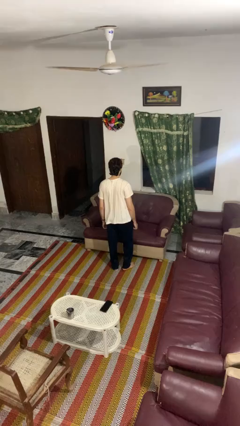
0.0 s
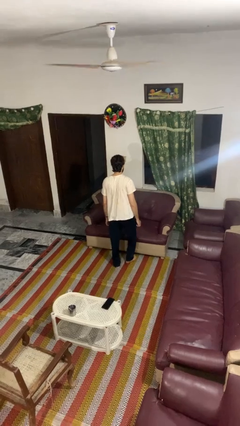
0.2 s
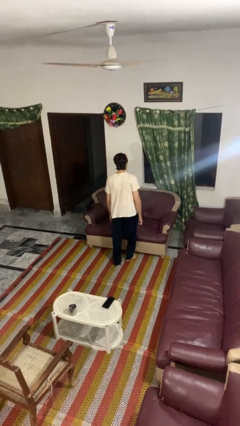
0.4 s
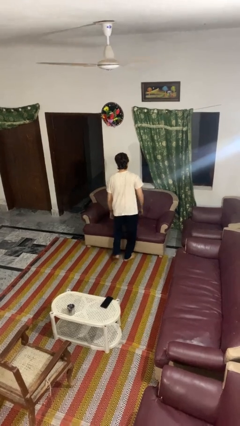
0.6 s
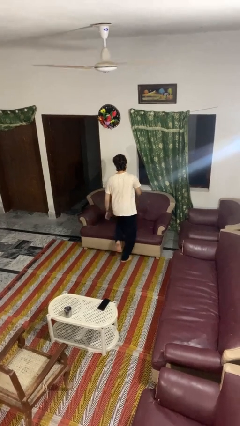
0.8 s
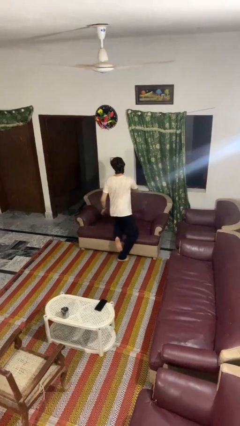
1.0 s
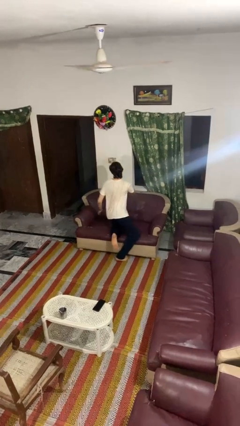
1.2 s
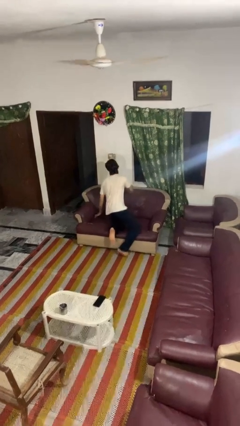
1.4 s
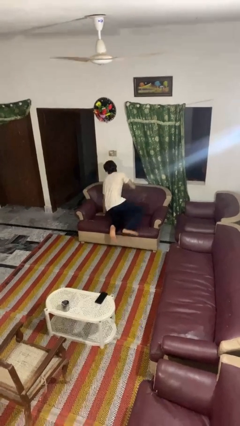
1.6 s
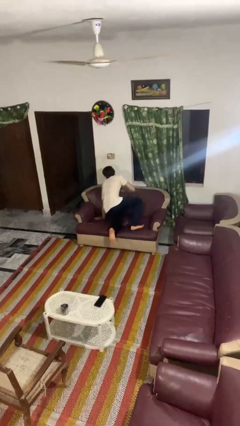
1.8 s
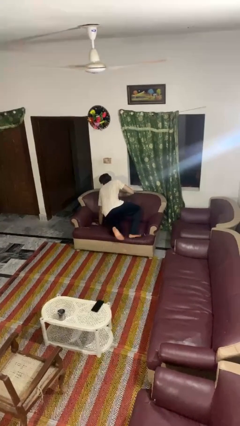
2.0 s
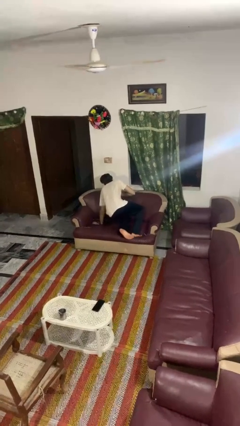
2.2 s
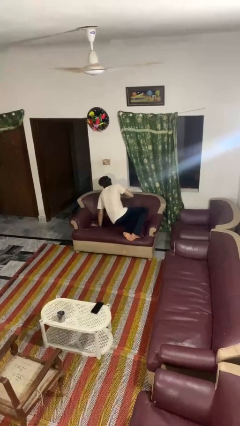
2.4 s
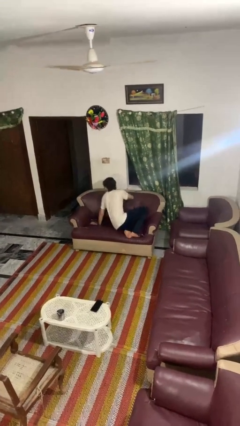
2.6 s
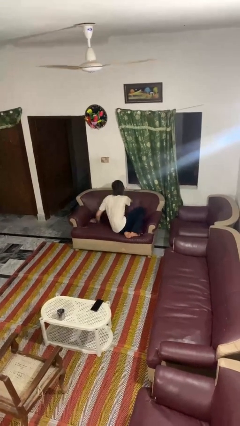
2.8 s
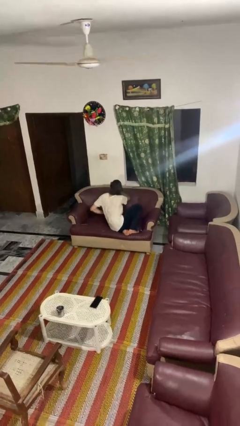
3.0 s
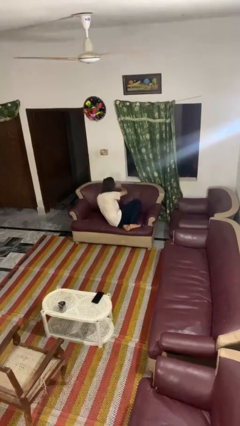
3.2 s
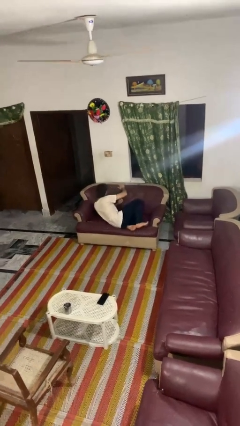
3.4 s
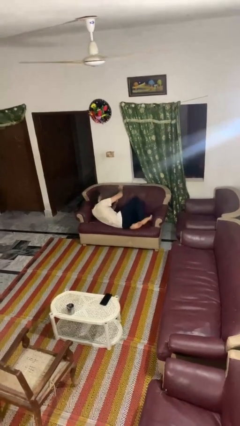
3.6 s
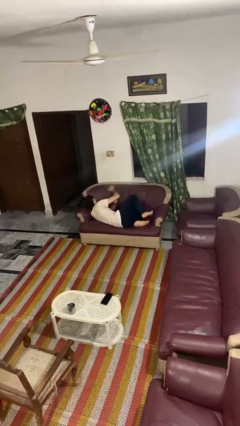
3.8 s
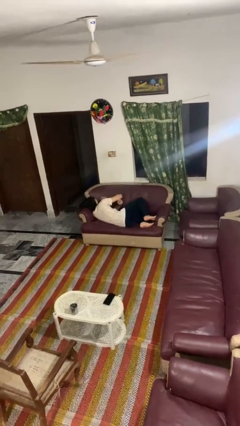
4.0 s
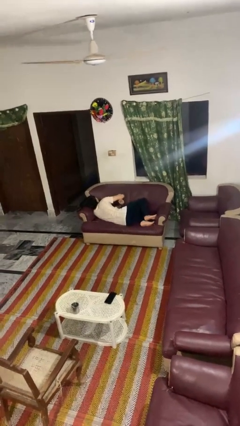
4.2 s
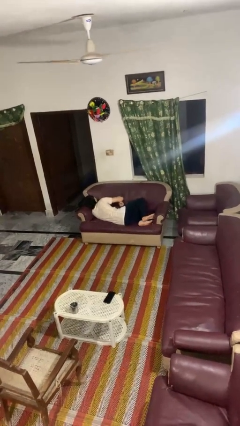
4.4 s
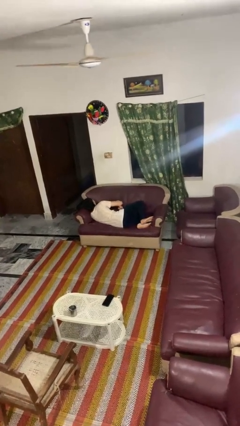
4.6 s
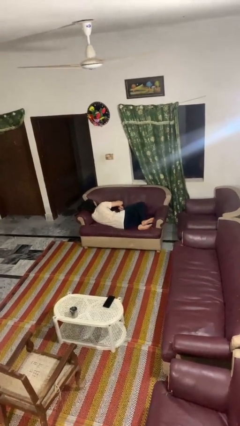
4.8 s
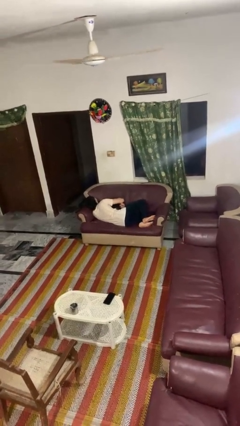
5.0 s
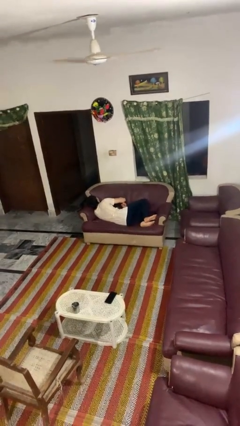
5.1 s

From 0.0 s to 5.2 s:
person lies down on couch

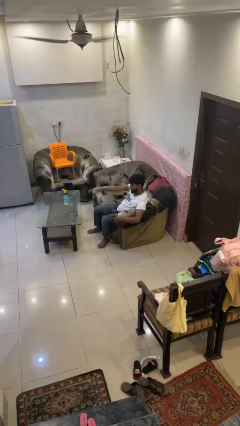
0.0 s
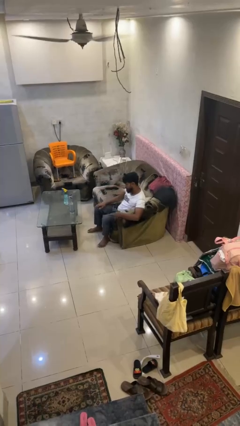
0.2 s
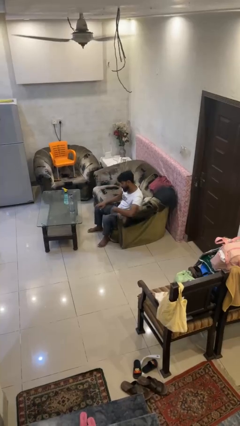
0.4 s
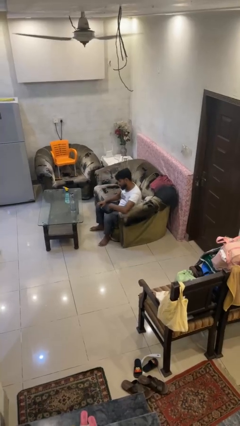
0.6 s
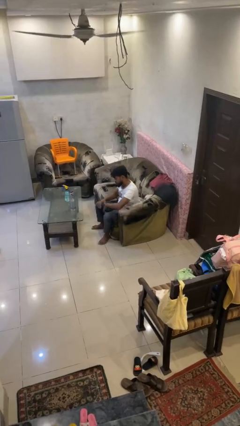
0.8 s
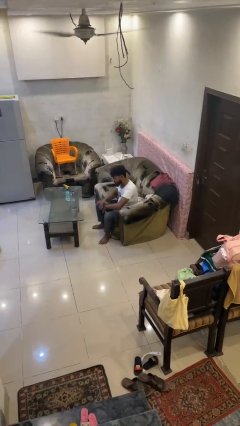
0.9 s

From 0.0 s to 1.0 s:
person gestures lower hand

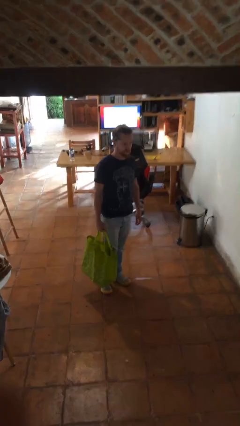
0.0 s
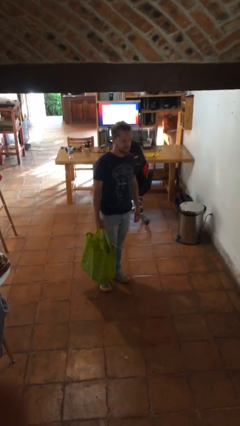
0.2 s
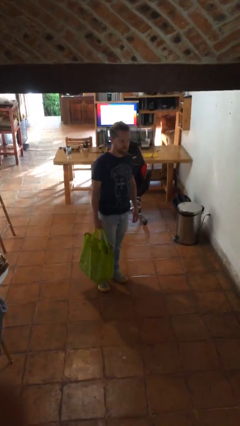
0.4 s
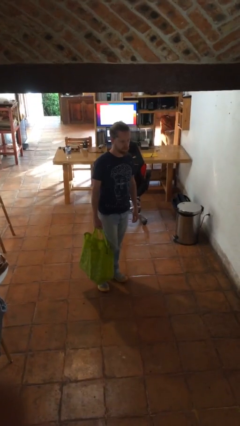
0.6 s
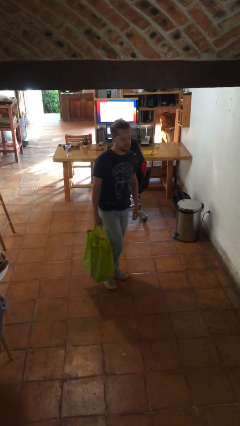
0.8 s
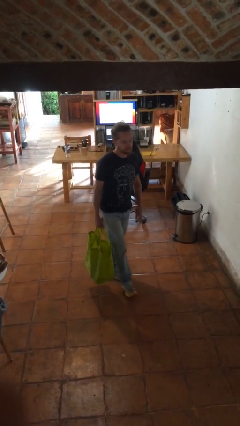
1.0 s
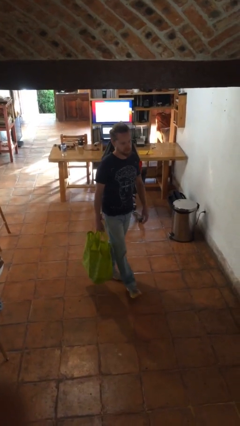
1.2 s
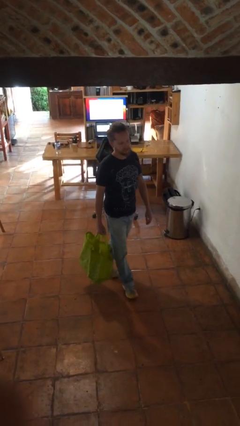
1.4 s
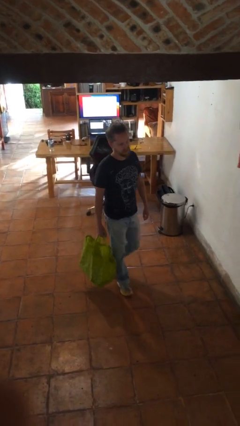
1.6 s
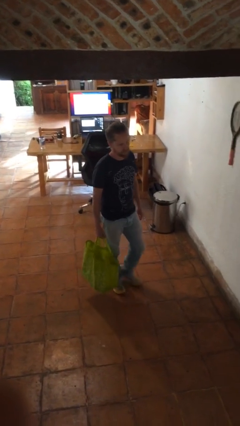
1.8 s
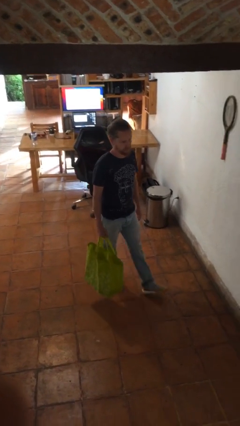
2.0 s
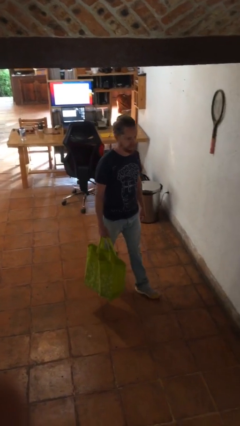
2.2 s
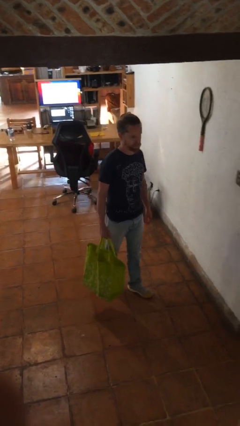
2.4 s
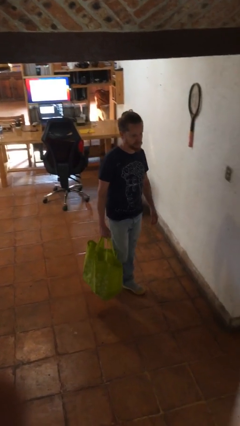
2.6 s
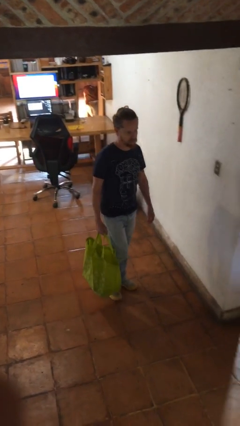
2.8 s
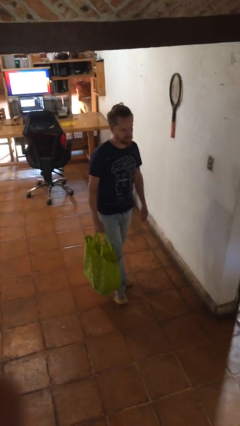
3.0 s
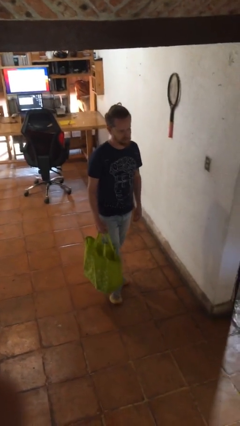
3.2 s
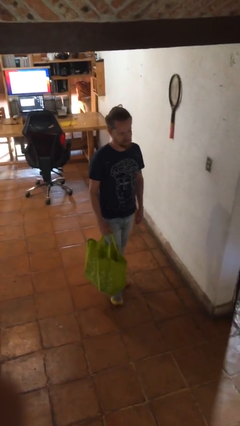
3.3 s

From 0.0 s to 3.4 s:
person carries groceries

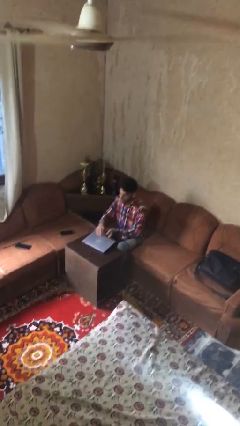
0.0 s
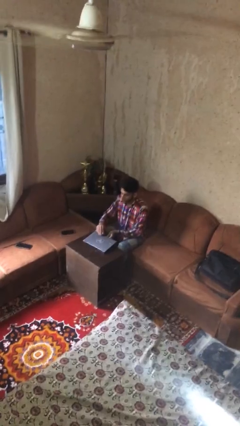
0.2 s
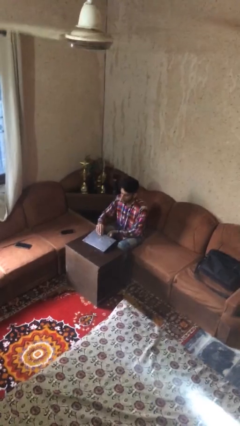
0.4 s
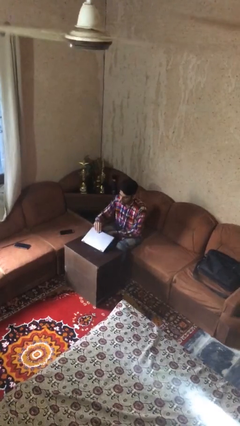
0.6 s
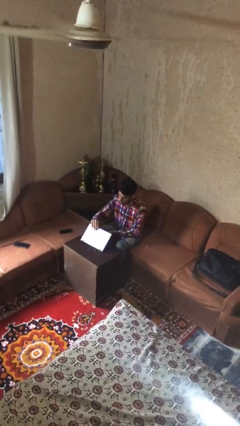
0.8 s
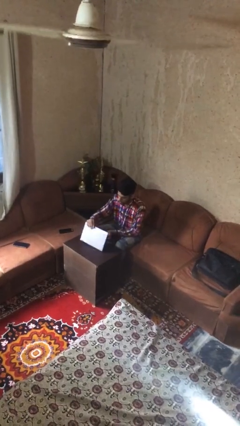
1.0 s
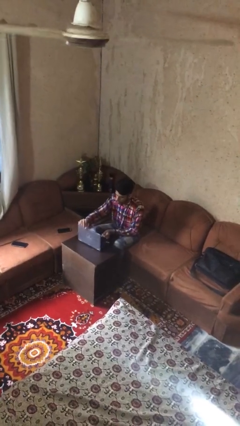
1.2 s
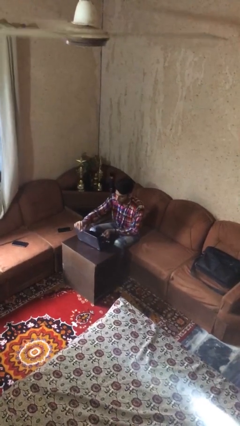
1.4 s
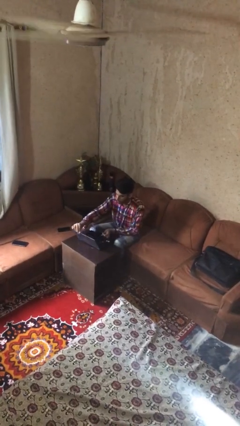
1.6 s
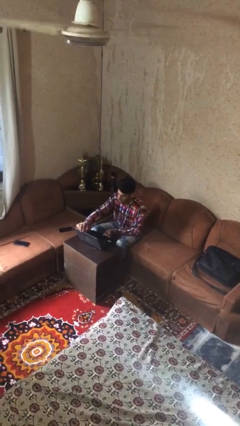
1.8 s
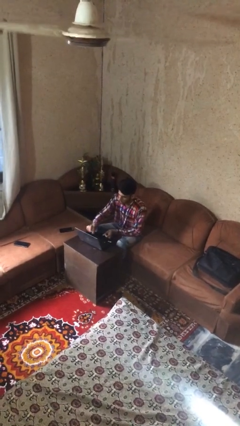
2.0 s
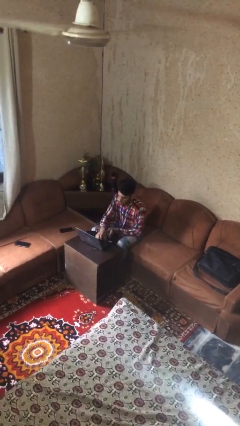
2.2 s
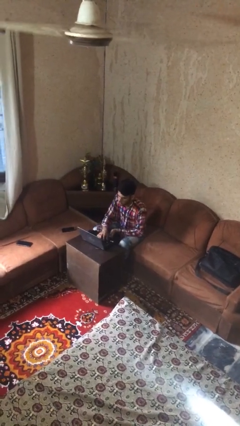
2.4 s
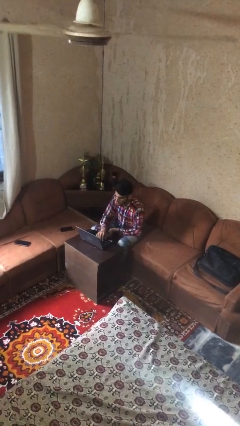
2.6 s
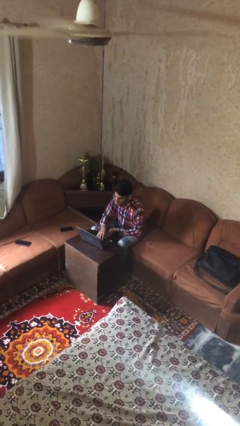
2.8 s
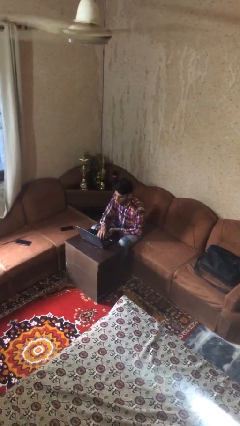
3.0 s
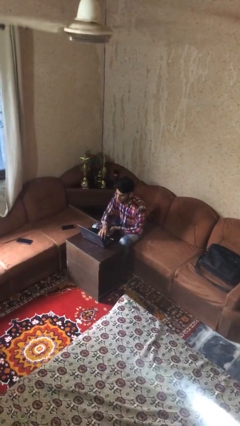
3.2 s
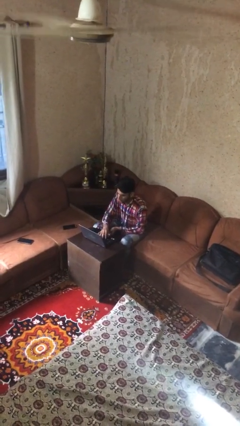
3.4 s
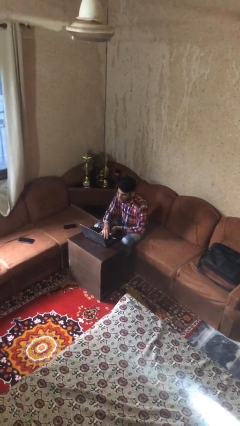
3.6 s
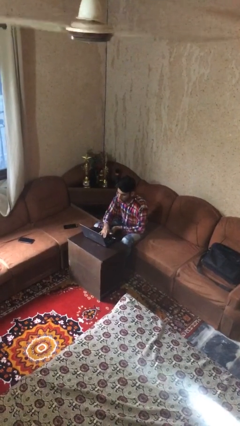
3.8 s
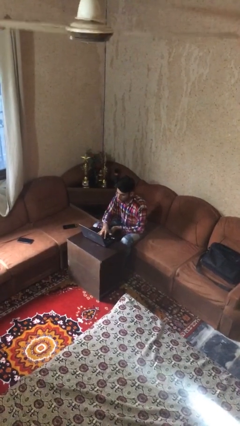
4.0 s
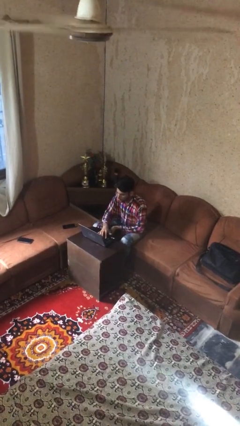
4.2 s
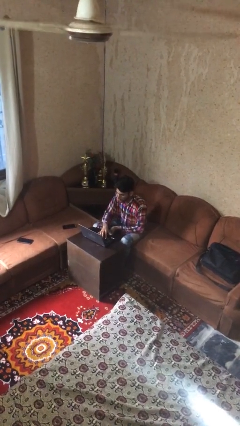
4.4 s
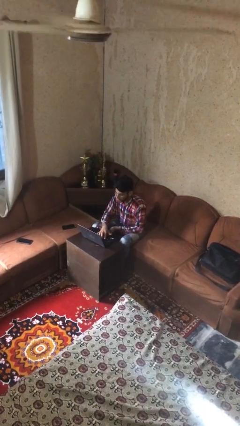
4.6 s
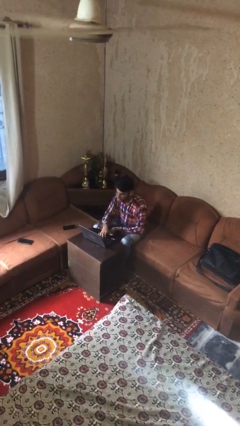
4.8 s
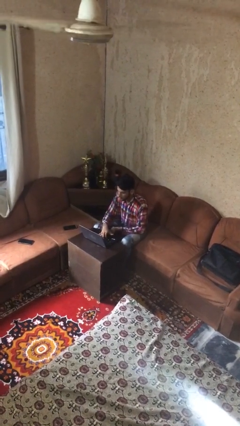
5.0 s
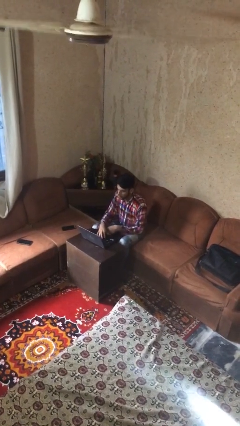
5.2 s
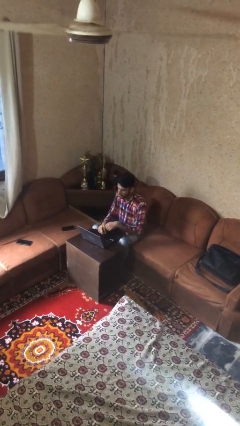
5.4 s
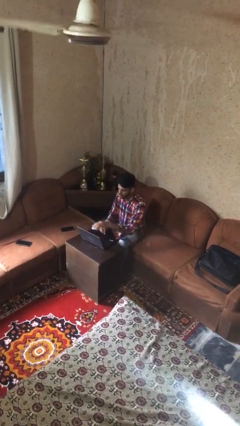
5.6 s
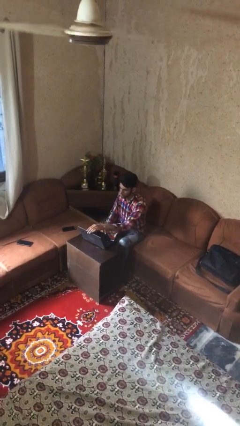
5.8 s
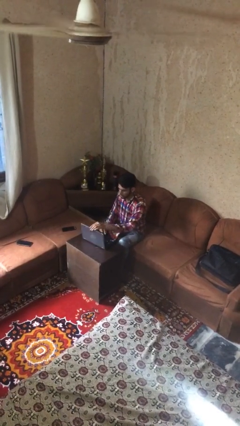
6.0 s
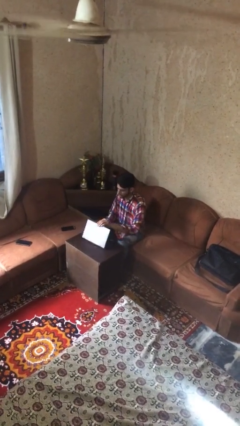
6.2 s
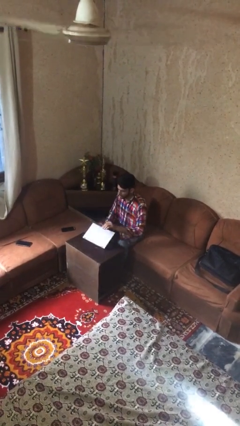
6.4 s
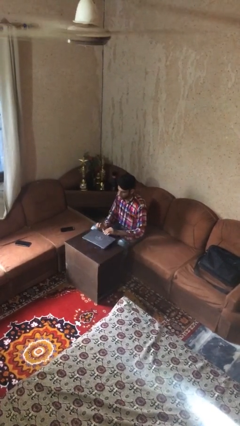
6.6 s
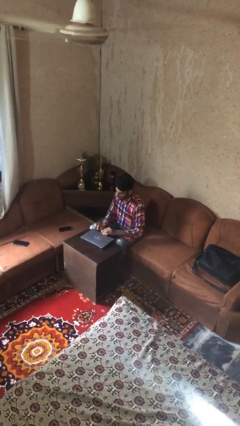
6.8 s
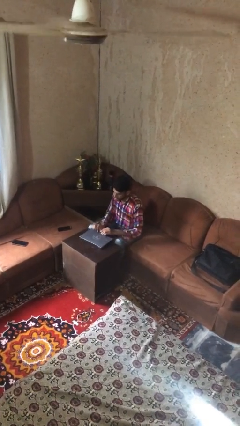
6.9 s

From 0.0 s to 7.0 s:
person interacts with laptop

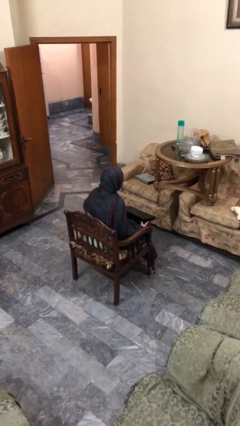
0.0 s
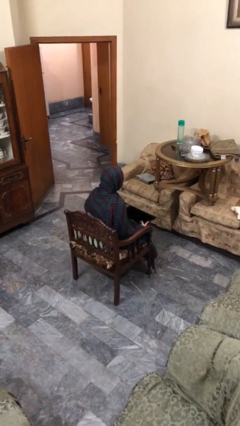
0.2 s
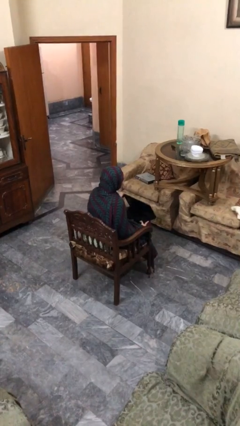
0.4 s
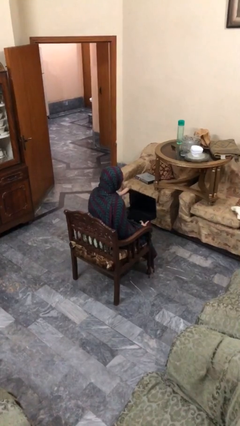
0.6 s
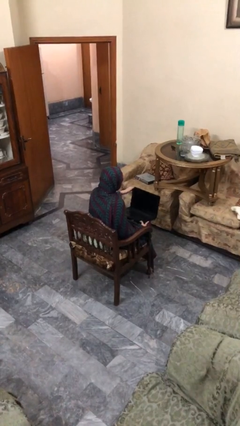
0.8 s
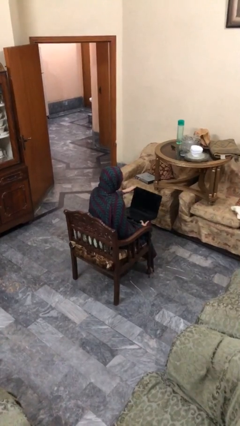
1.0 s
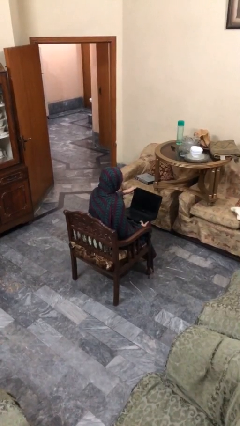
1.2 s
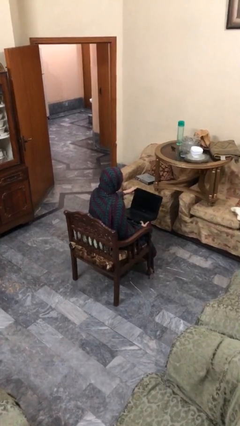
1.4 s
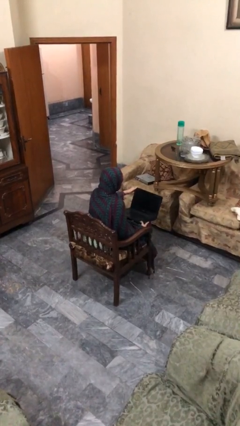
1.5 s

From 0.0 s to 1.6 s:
person opens laptop
